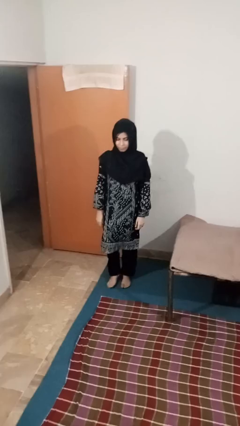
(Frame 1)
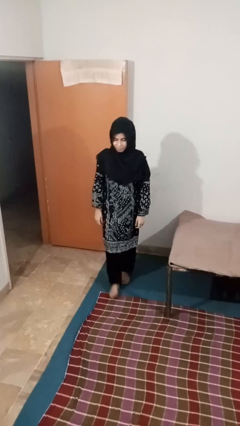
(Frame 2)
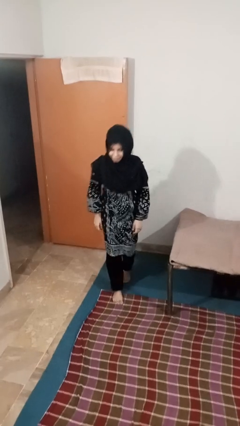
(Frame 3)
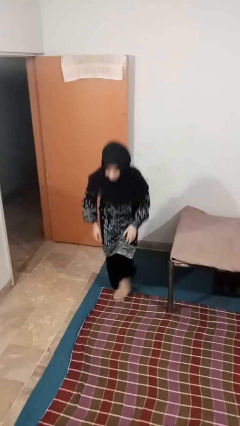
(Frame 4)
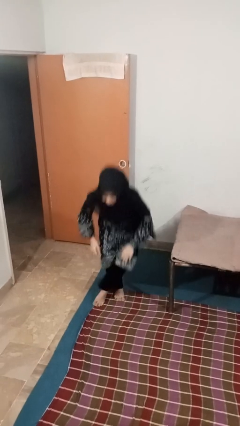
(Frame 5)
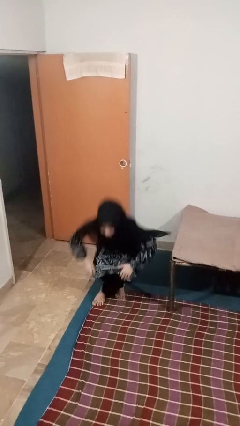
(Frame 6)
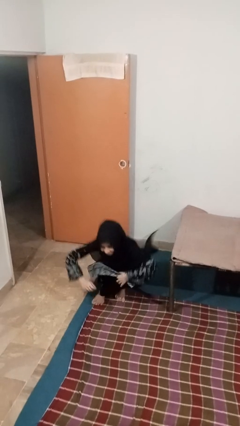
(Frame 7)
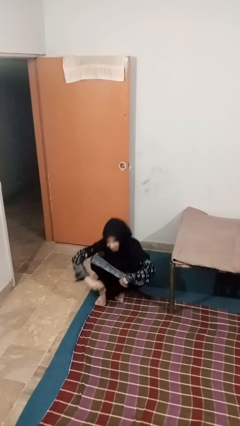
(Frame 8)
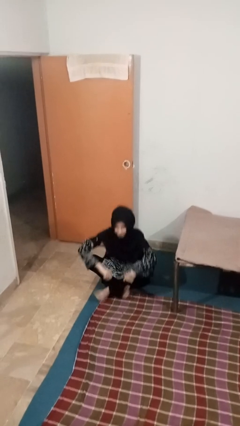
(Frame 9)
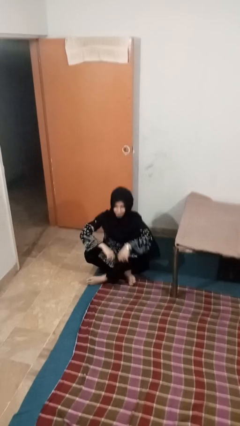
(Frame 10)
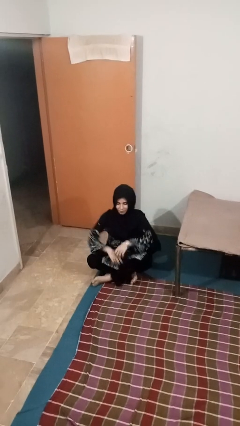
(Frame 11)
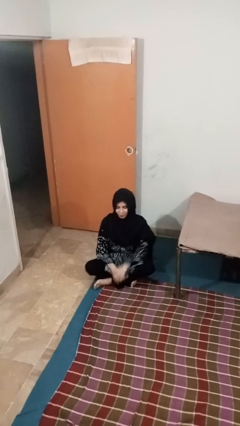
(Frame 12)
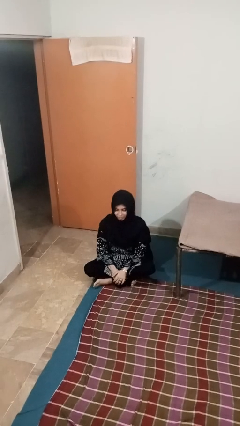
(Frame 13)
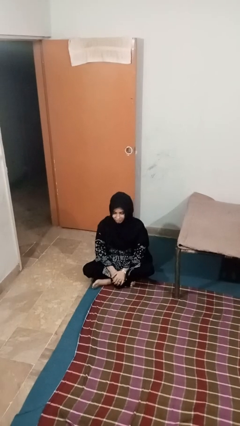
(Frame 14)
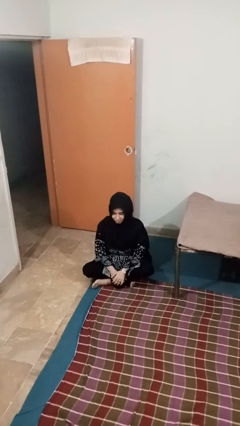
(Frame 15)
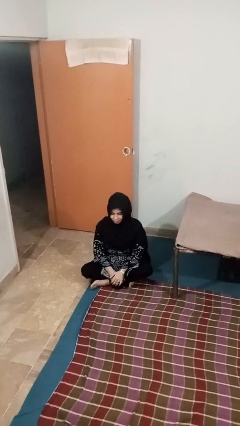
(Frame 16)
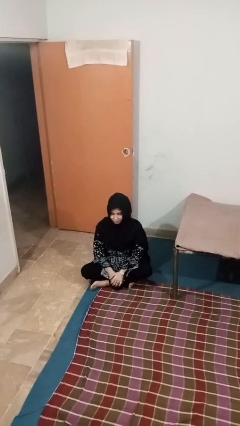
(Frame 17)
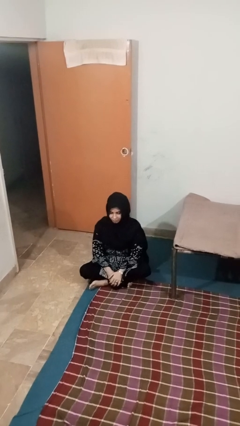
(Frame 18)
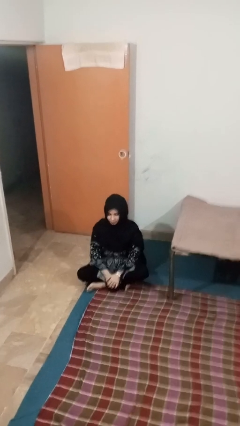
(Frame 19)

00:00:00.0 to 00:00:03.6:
person sits crisscross

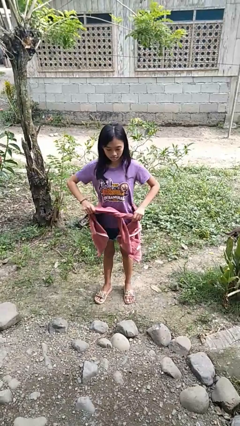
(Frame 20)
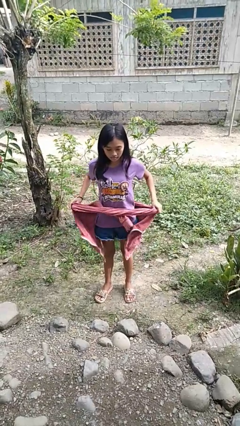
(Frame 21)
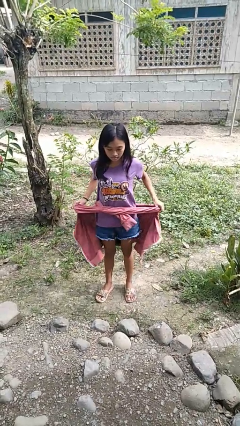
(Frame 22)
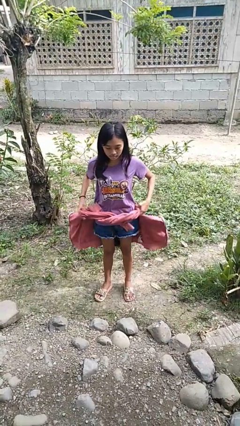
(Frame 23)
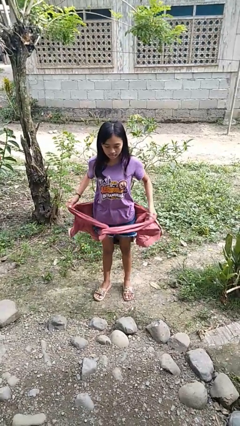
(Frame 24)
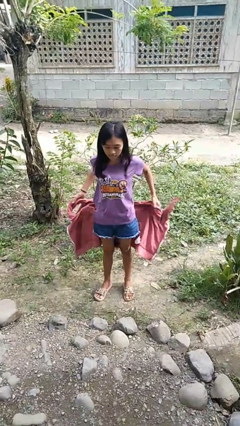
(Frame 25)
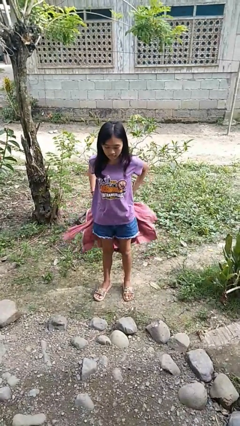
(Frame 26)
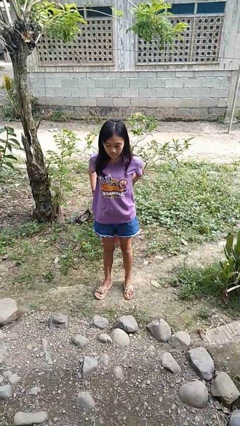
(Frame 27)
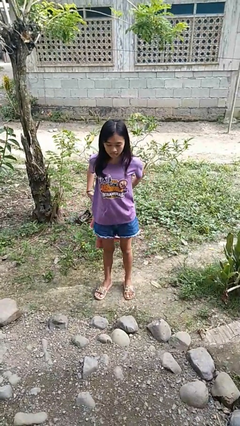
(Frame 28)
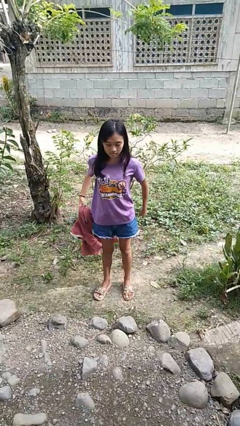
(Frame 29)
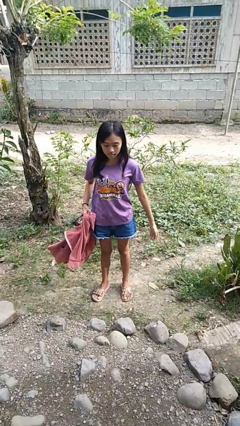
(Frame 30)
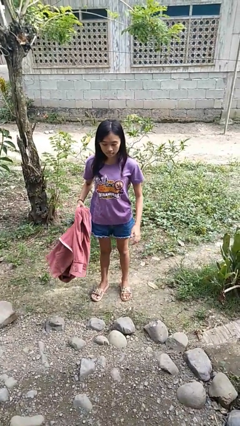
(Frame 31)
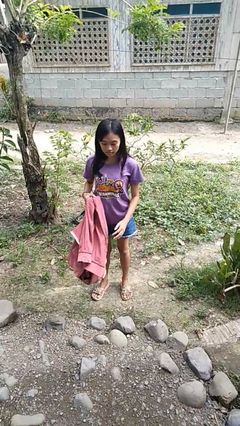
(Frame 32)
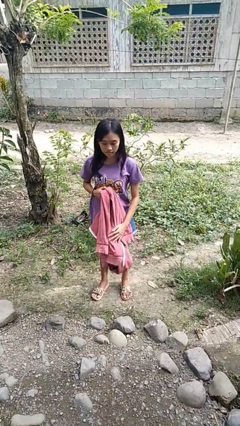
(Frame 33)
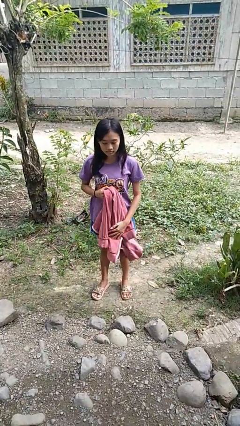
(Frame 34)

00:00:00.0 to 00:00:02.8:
person unties jacket around waist

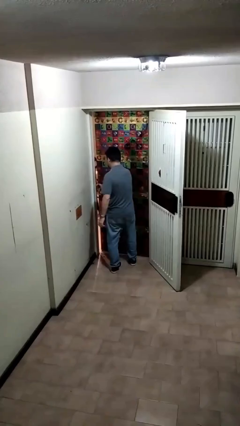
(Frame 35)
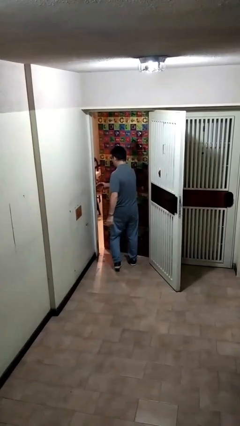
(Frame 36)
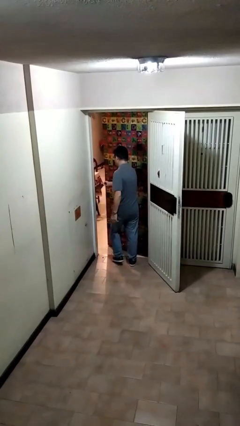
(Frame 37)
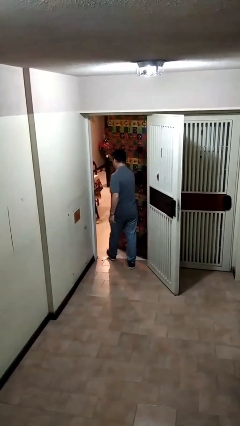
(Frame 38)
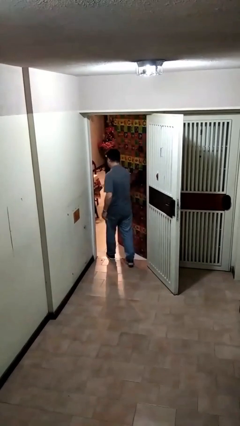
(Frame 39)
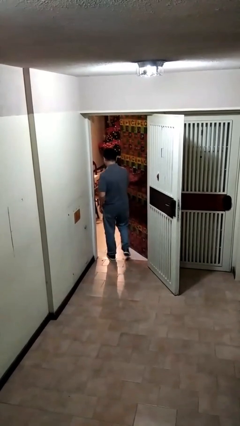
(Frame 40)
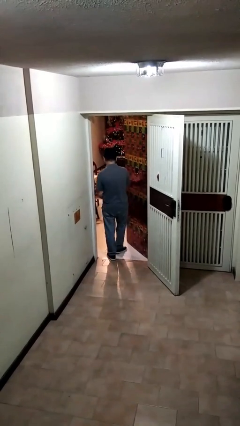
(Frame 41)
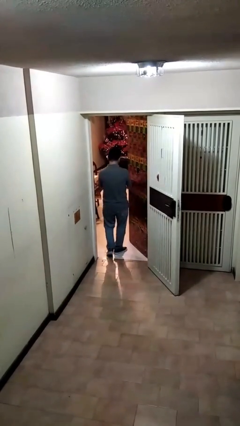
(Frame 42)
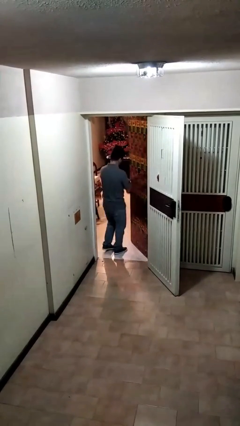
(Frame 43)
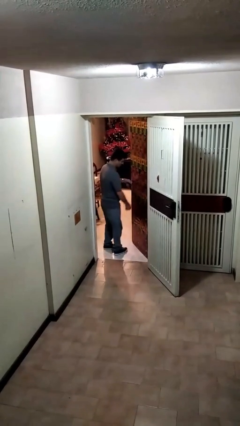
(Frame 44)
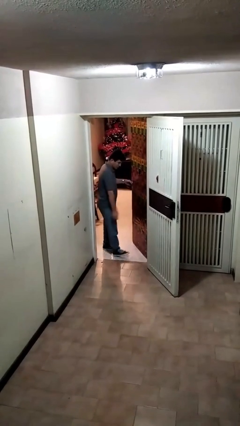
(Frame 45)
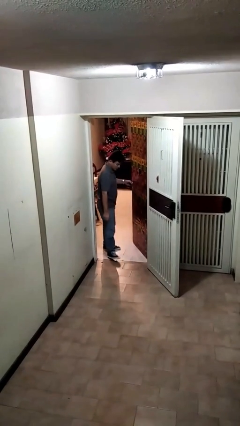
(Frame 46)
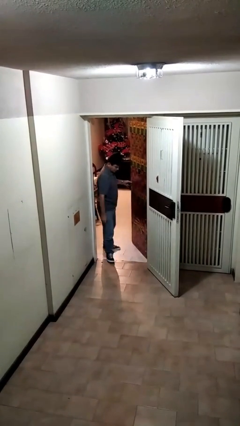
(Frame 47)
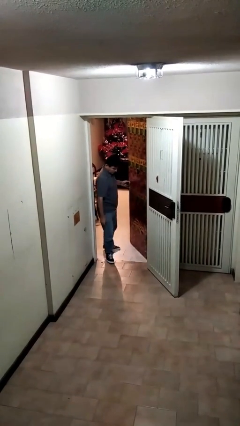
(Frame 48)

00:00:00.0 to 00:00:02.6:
person opens facility door

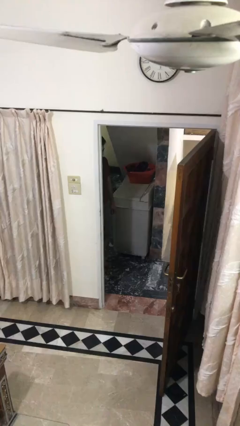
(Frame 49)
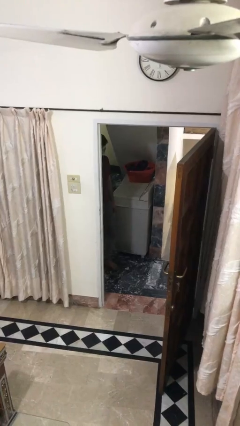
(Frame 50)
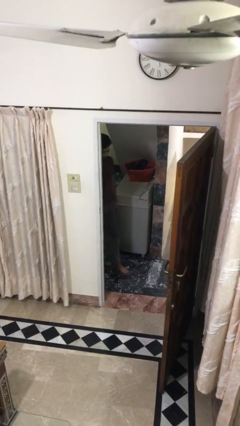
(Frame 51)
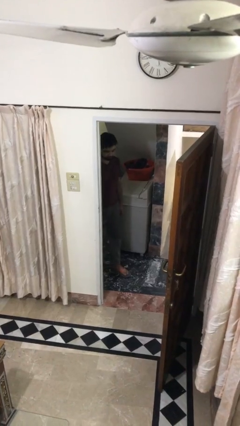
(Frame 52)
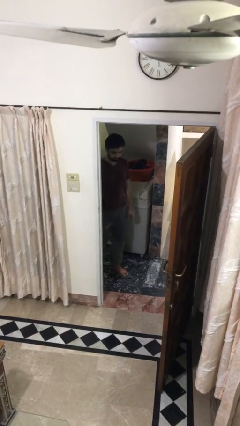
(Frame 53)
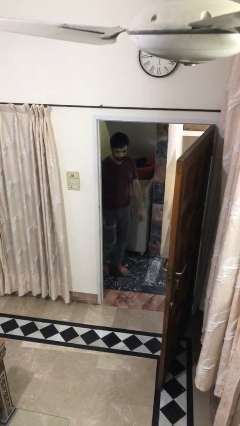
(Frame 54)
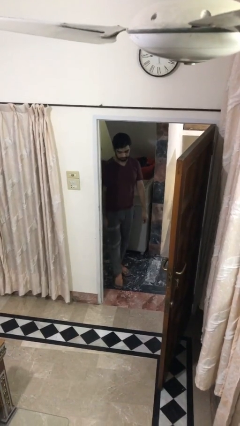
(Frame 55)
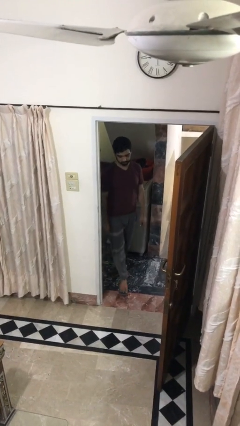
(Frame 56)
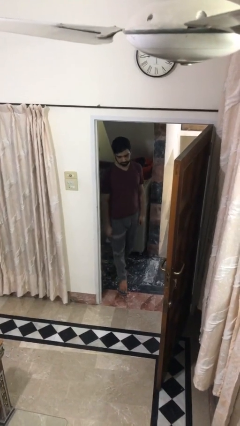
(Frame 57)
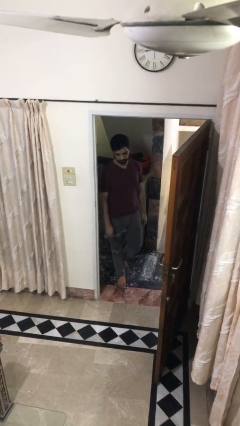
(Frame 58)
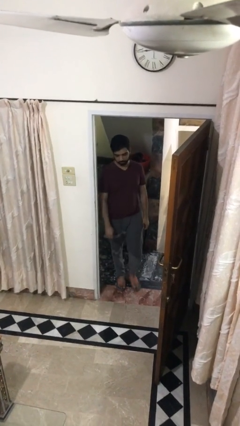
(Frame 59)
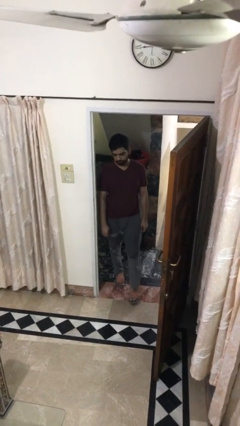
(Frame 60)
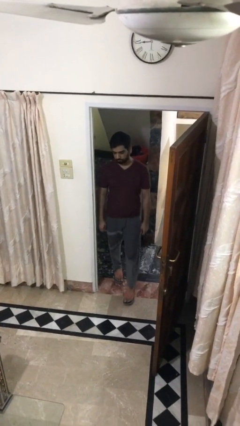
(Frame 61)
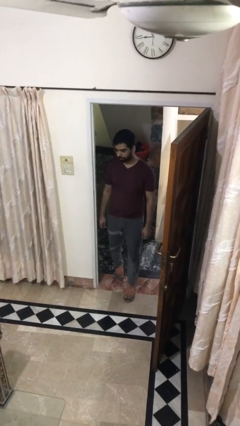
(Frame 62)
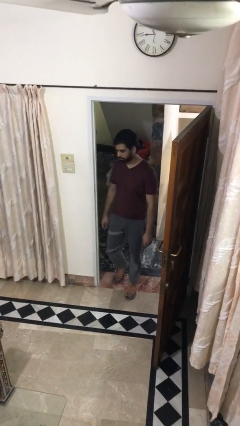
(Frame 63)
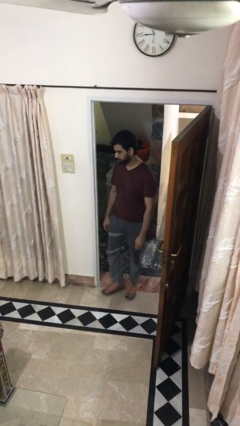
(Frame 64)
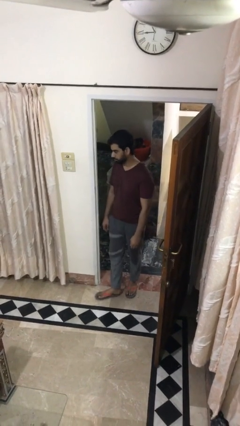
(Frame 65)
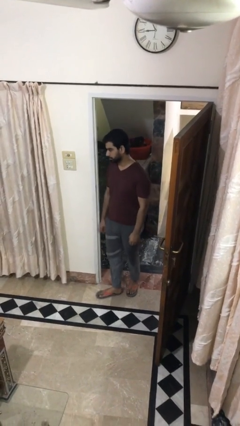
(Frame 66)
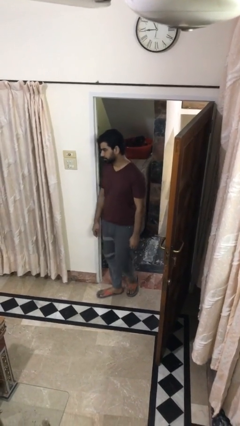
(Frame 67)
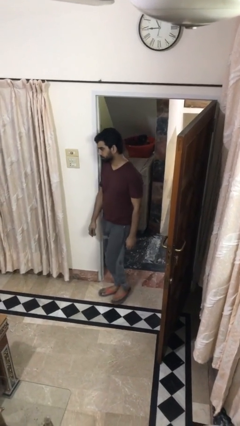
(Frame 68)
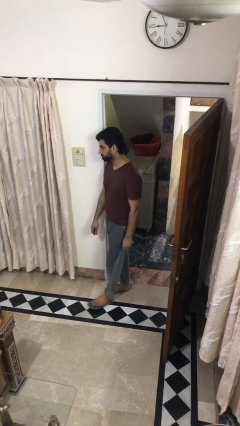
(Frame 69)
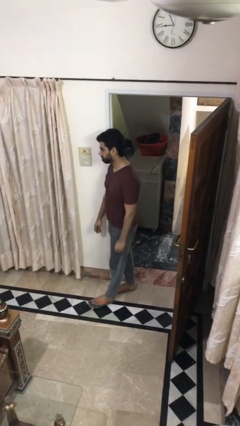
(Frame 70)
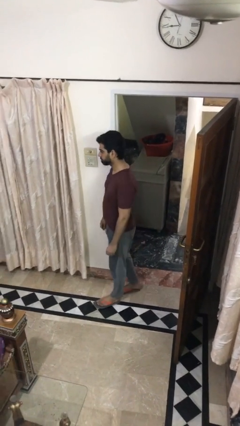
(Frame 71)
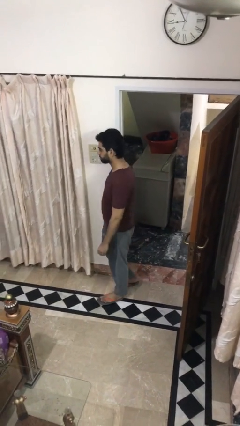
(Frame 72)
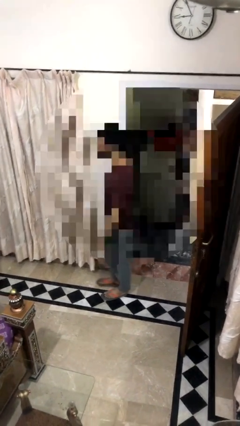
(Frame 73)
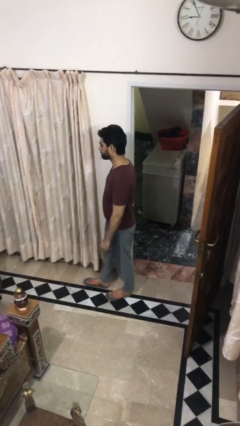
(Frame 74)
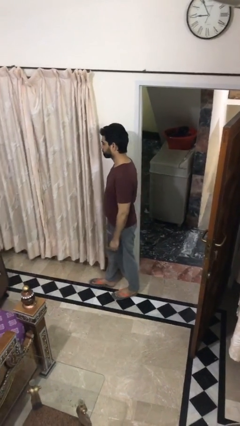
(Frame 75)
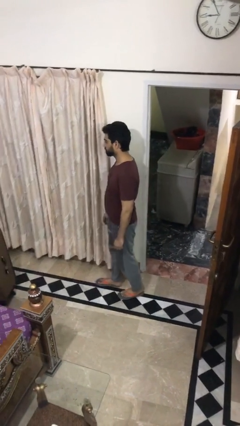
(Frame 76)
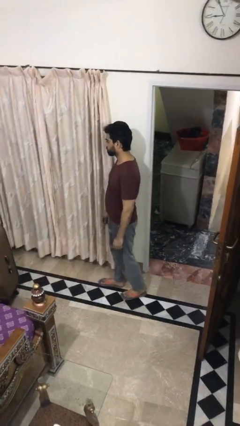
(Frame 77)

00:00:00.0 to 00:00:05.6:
person enters scene through structure

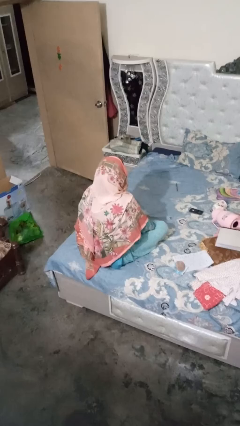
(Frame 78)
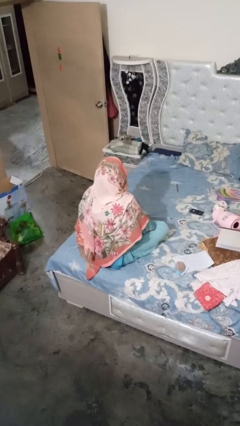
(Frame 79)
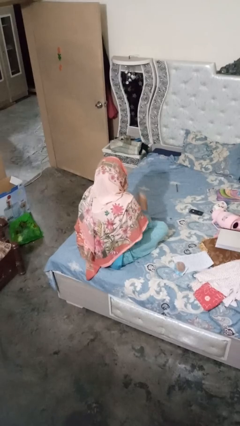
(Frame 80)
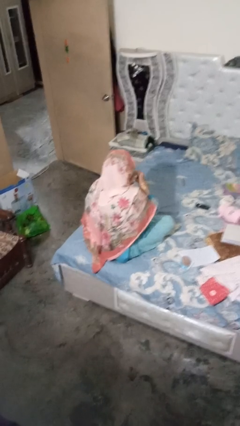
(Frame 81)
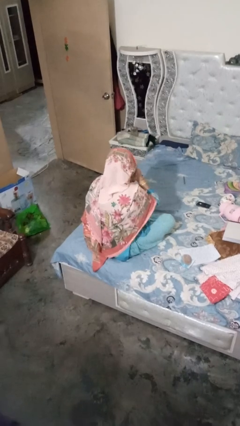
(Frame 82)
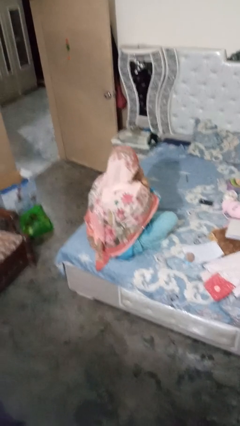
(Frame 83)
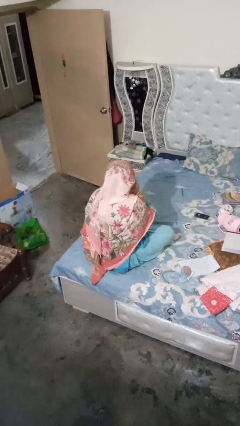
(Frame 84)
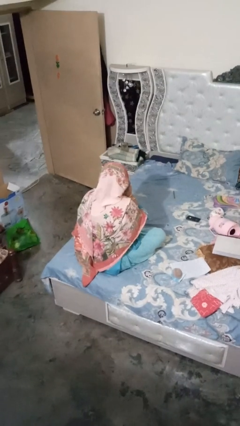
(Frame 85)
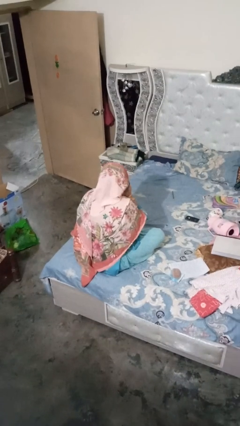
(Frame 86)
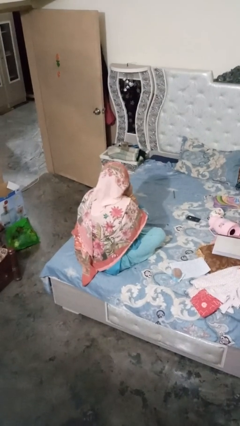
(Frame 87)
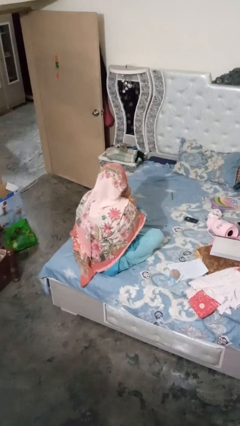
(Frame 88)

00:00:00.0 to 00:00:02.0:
person gestures listen closely

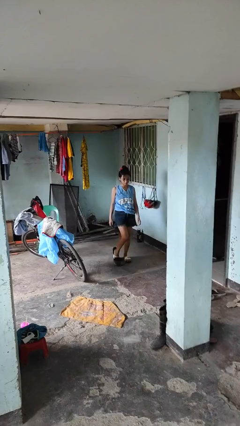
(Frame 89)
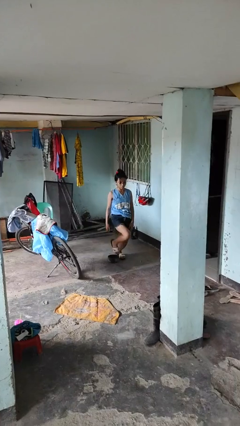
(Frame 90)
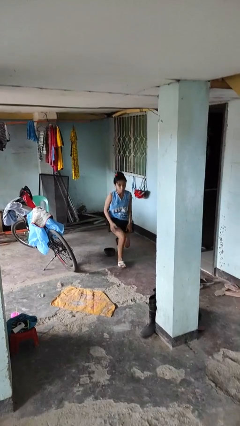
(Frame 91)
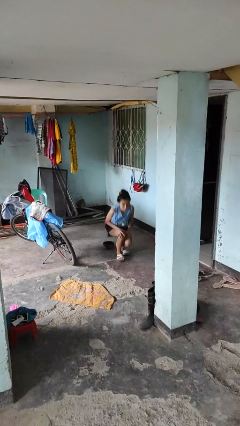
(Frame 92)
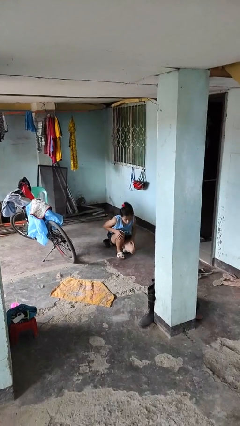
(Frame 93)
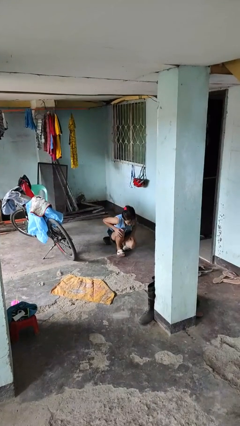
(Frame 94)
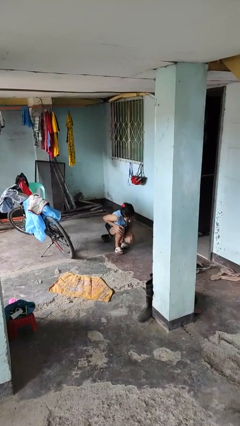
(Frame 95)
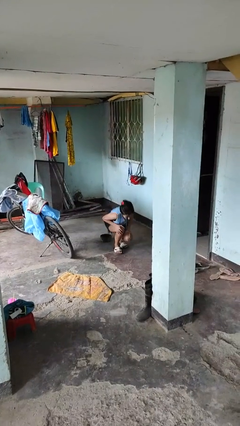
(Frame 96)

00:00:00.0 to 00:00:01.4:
person trips on object on floor
